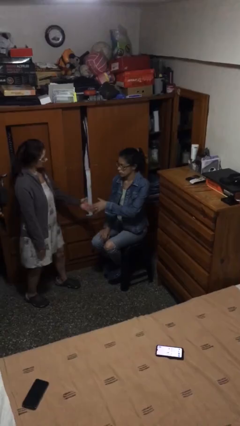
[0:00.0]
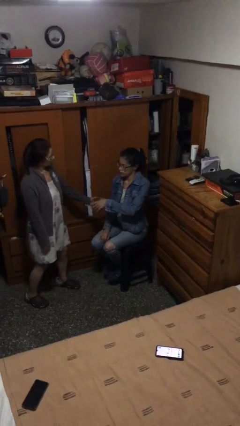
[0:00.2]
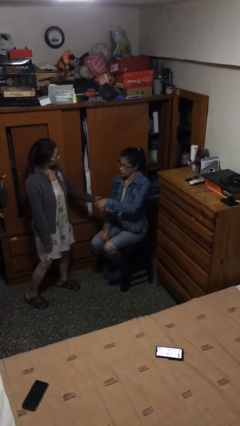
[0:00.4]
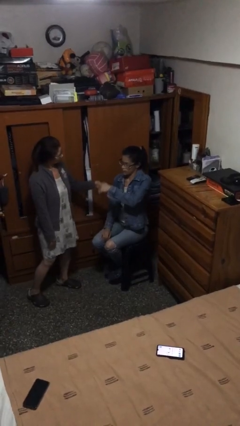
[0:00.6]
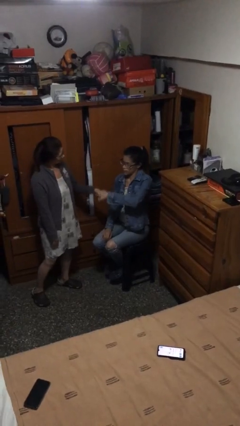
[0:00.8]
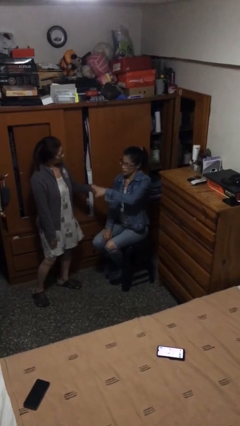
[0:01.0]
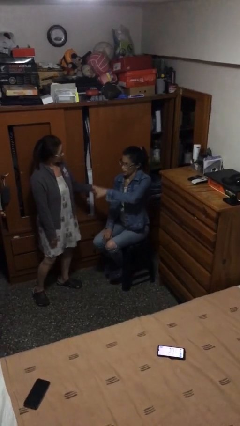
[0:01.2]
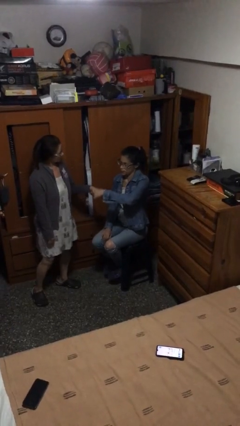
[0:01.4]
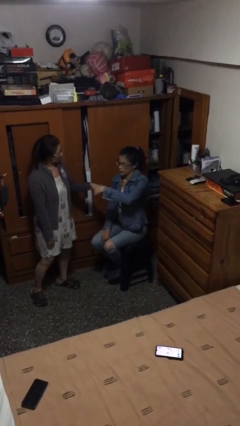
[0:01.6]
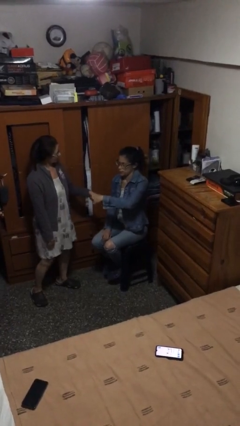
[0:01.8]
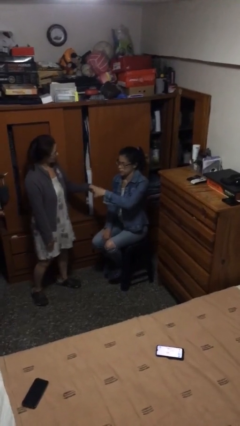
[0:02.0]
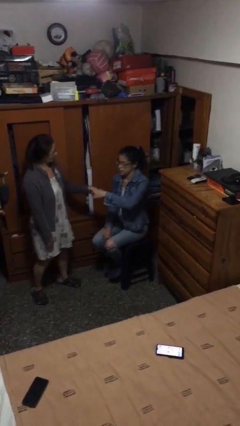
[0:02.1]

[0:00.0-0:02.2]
person shakes hand

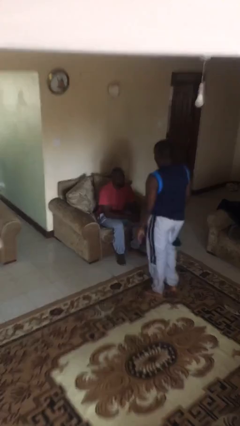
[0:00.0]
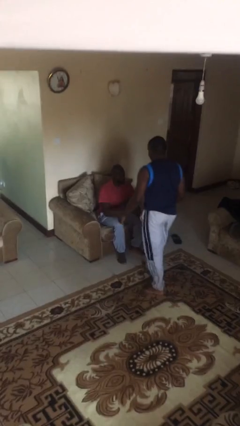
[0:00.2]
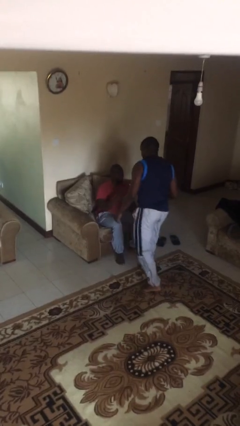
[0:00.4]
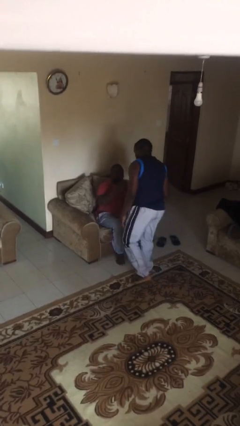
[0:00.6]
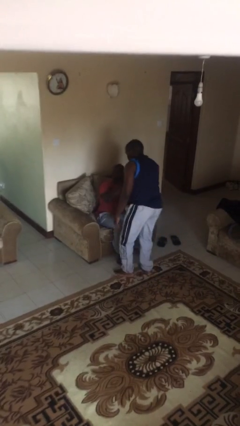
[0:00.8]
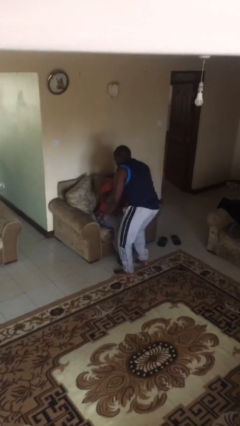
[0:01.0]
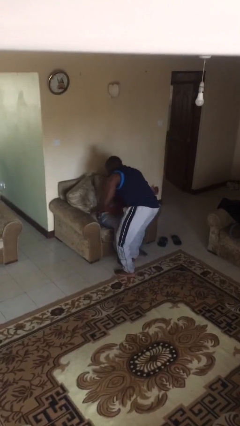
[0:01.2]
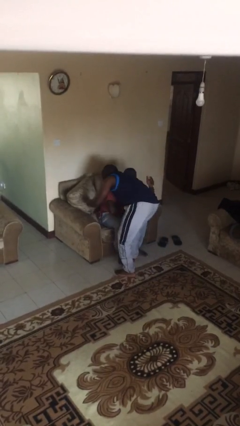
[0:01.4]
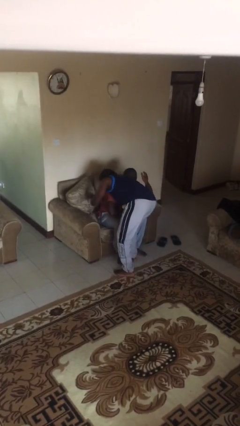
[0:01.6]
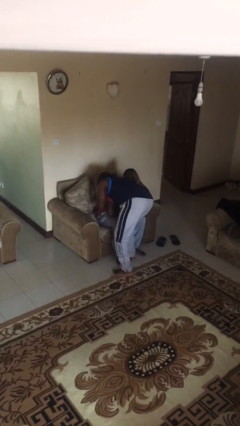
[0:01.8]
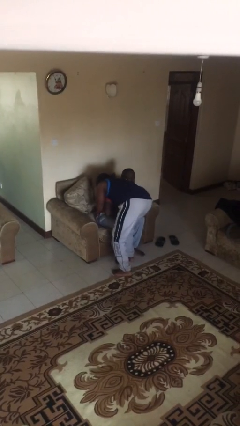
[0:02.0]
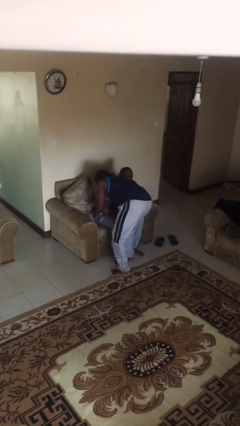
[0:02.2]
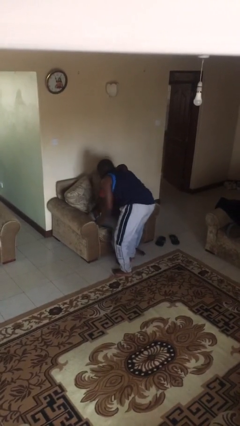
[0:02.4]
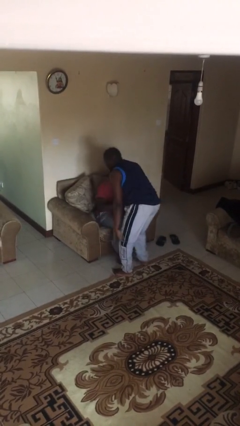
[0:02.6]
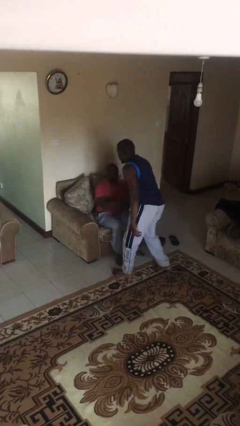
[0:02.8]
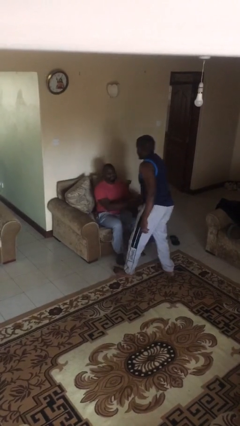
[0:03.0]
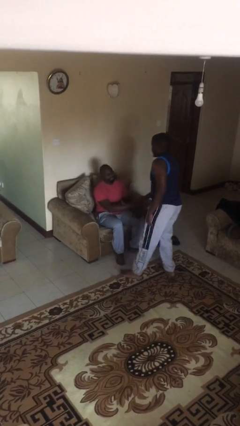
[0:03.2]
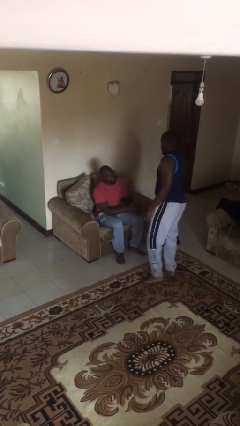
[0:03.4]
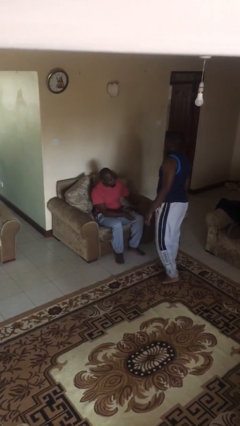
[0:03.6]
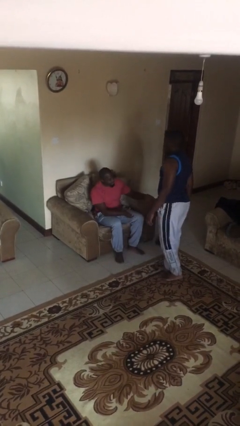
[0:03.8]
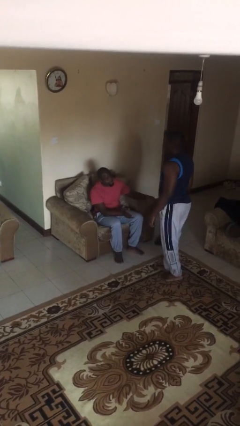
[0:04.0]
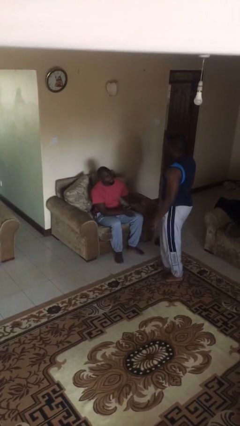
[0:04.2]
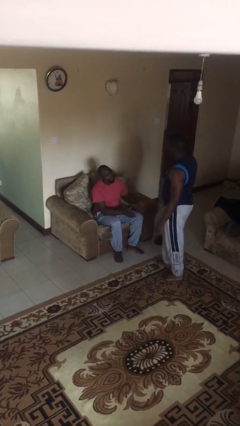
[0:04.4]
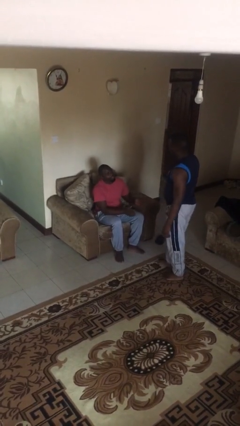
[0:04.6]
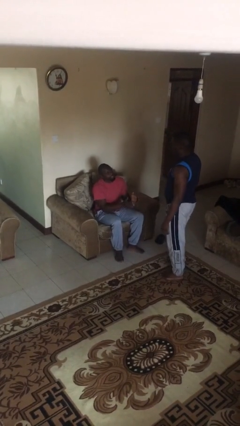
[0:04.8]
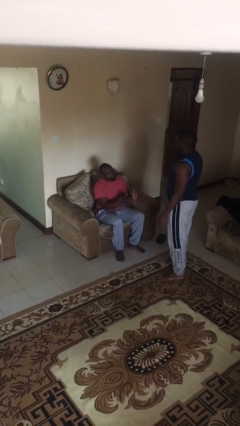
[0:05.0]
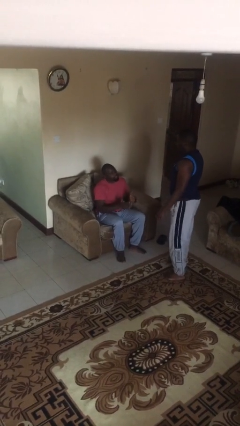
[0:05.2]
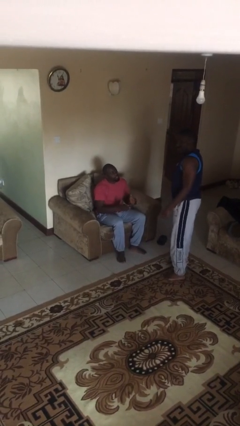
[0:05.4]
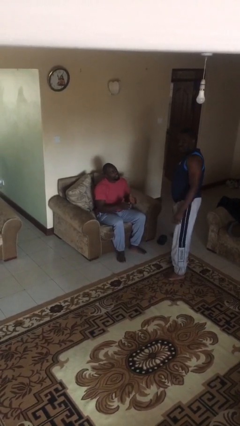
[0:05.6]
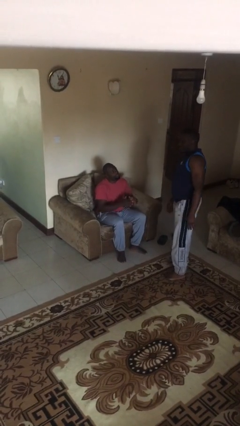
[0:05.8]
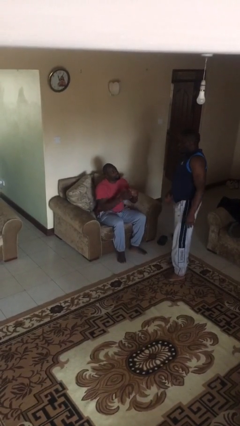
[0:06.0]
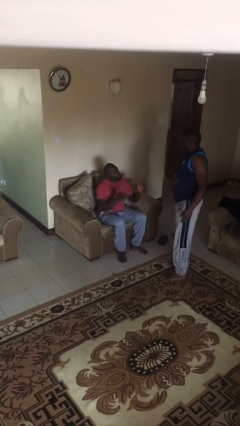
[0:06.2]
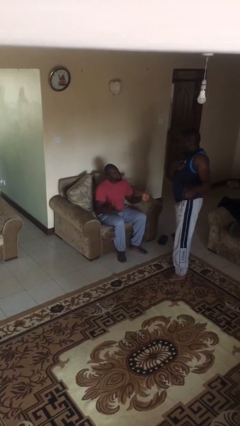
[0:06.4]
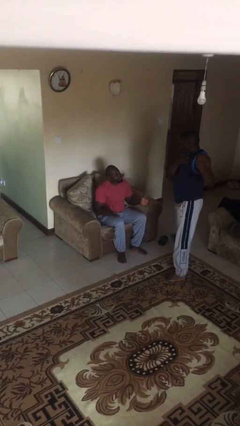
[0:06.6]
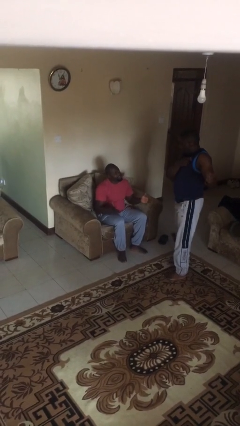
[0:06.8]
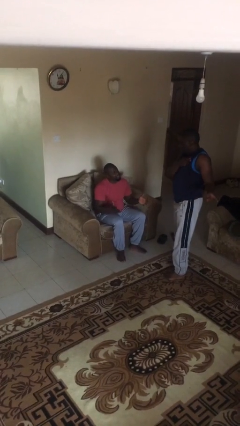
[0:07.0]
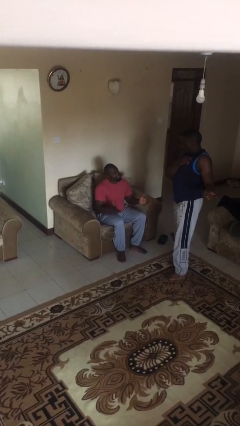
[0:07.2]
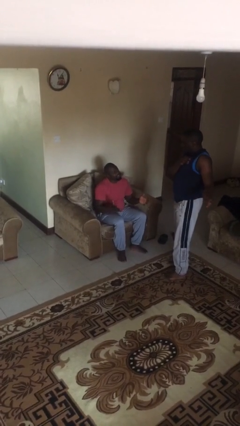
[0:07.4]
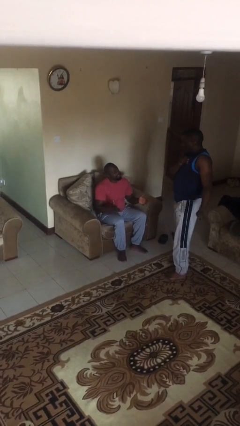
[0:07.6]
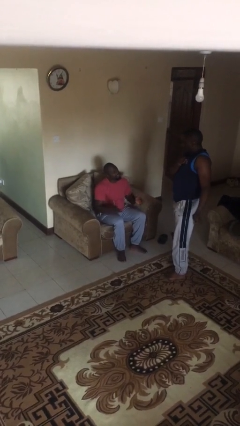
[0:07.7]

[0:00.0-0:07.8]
person embraces person

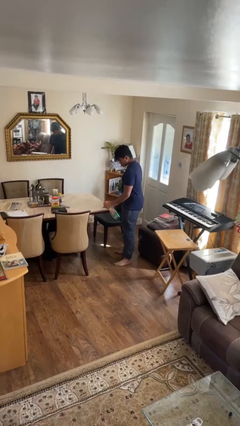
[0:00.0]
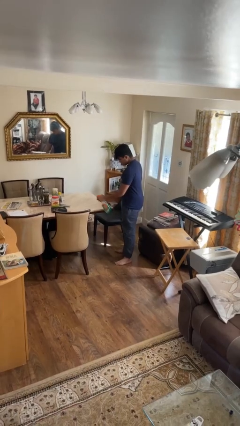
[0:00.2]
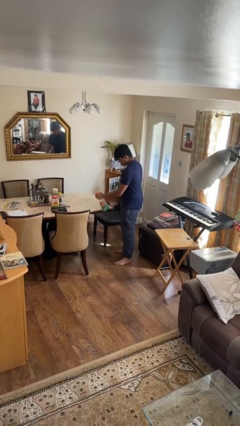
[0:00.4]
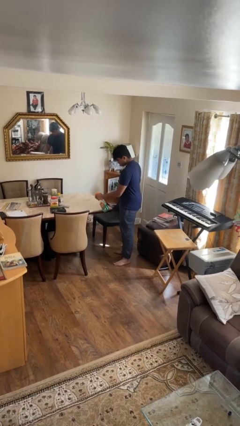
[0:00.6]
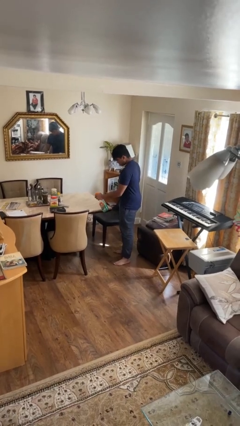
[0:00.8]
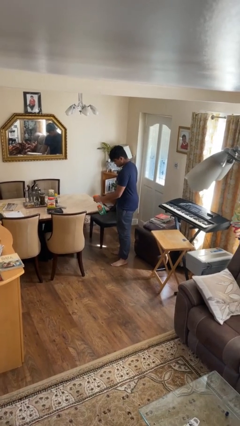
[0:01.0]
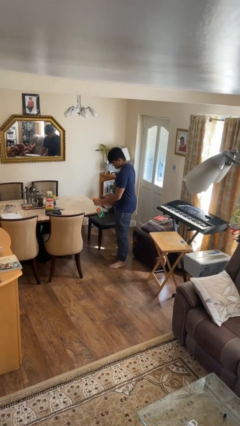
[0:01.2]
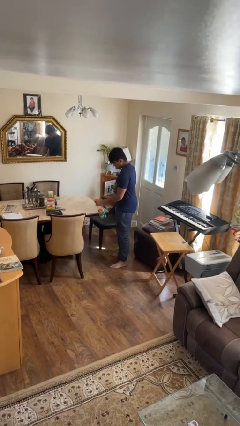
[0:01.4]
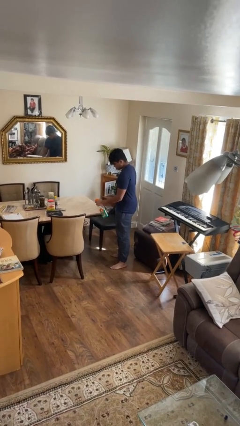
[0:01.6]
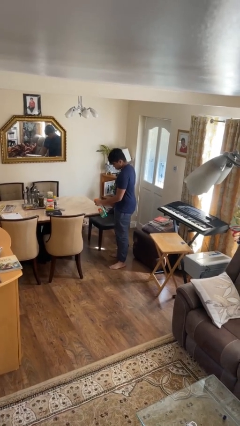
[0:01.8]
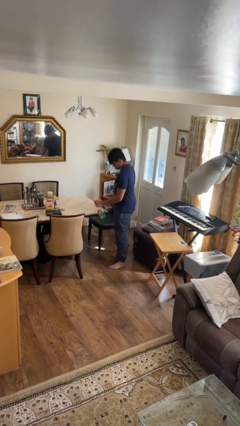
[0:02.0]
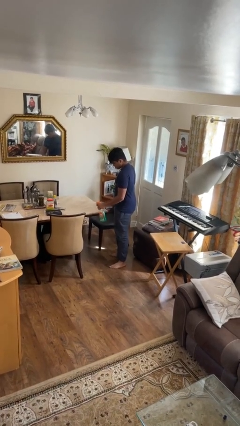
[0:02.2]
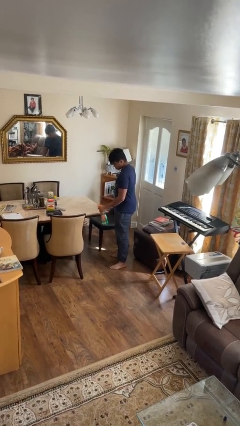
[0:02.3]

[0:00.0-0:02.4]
person sprays from bottle

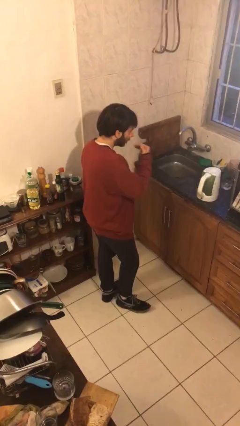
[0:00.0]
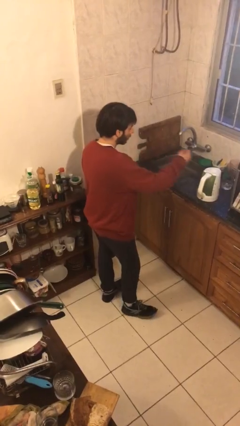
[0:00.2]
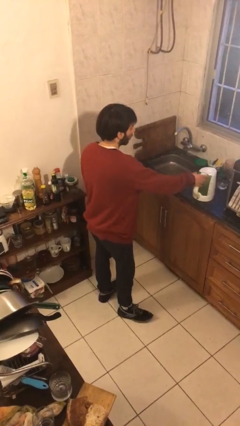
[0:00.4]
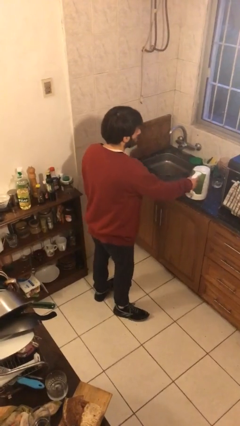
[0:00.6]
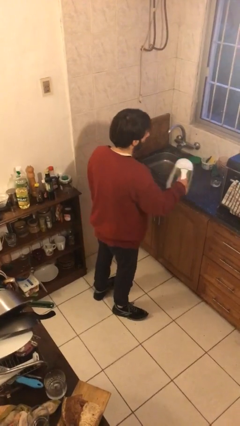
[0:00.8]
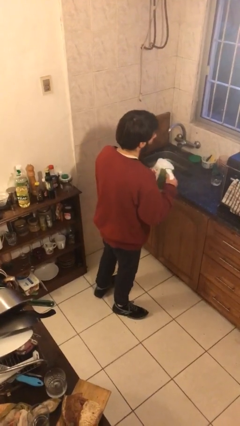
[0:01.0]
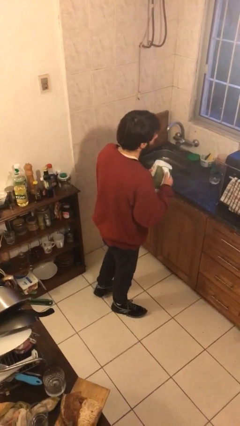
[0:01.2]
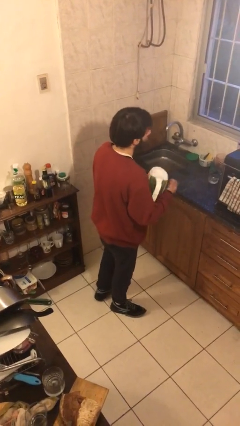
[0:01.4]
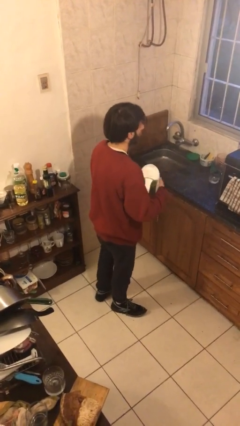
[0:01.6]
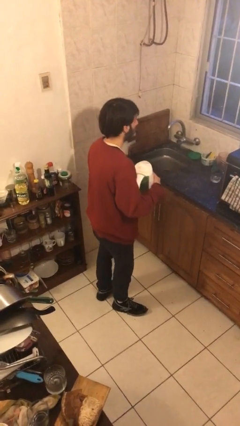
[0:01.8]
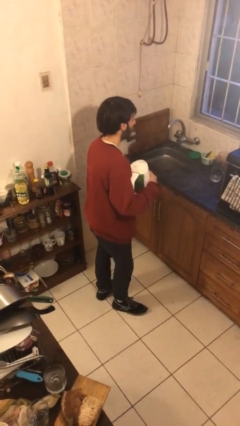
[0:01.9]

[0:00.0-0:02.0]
person picks up object from countertop

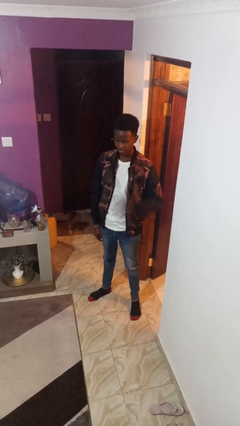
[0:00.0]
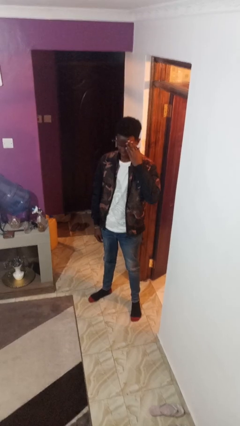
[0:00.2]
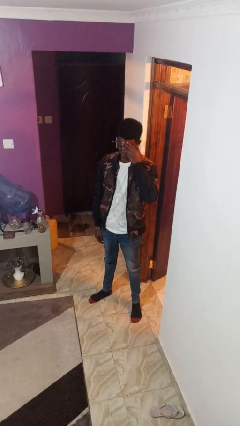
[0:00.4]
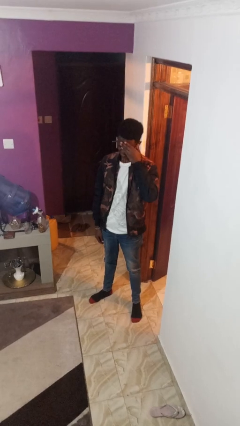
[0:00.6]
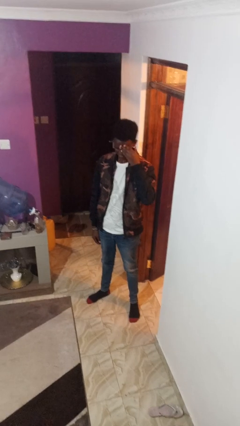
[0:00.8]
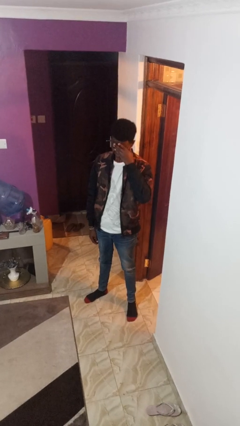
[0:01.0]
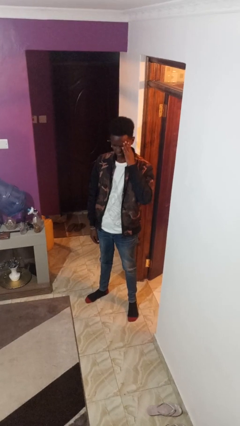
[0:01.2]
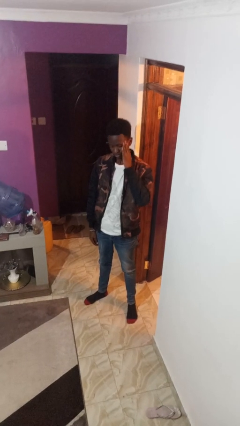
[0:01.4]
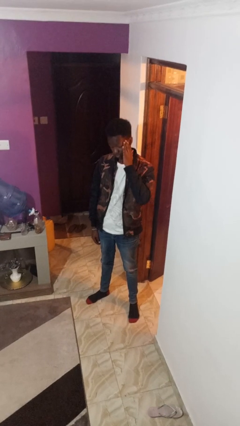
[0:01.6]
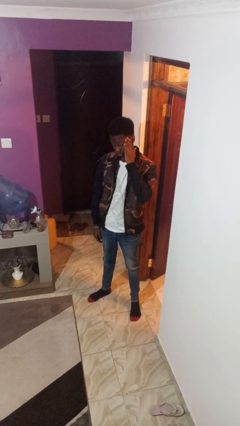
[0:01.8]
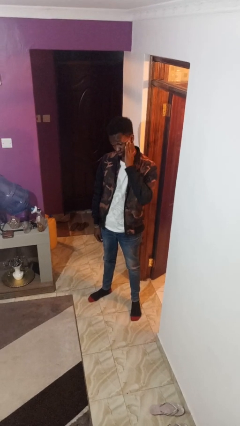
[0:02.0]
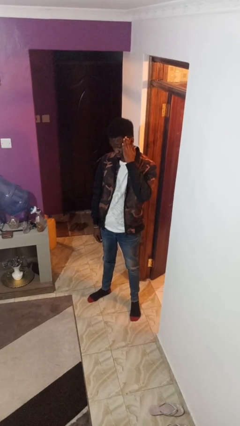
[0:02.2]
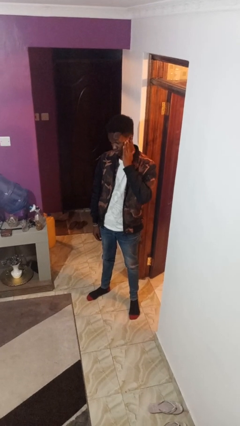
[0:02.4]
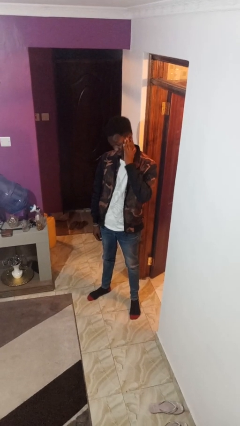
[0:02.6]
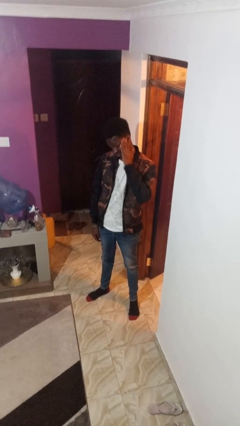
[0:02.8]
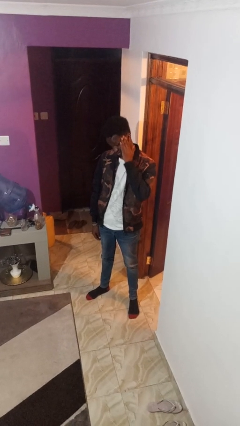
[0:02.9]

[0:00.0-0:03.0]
person scratches face
